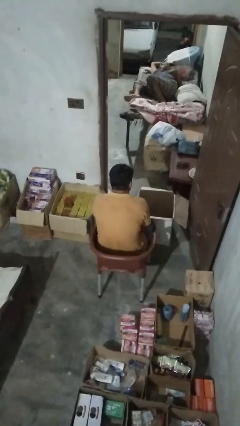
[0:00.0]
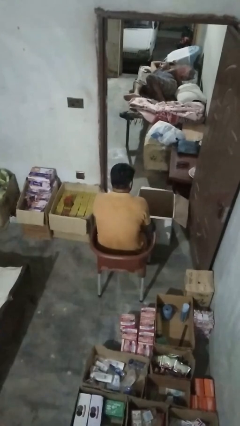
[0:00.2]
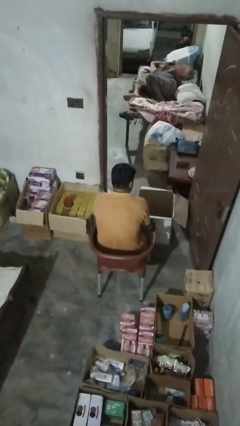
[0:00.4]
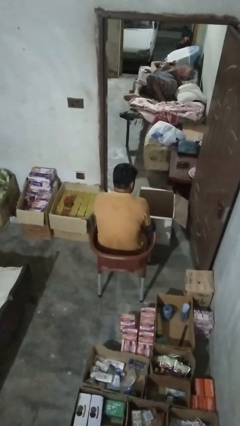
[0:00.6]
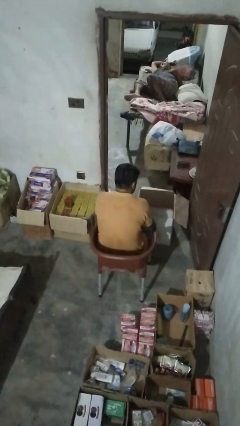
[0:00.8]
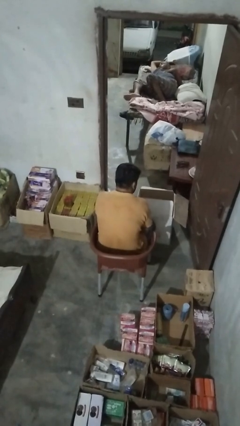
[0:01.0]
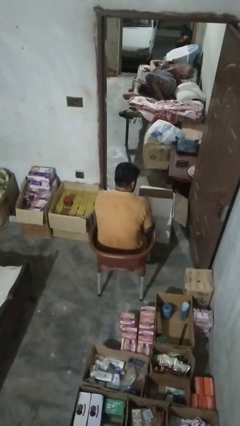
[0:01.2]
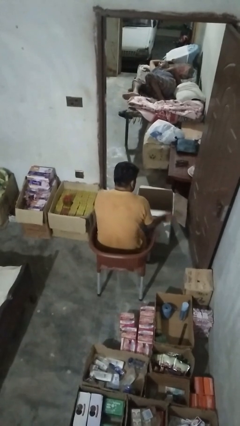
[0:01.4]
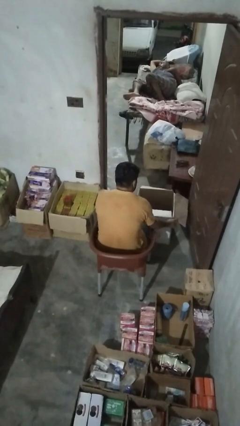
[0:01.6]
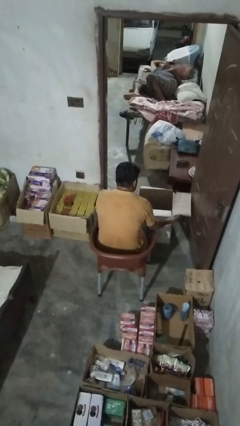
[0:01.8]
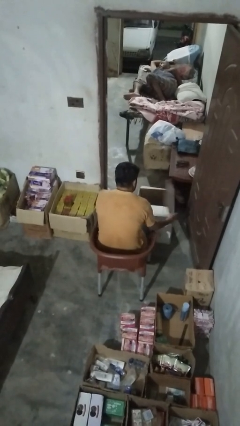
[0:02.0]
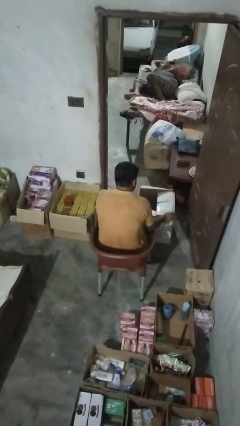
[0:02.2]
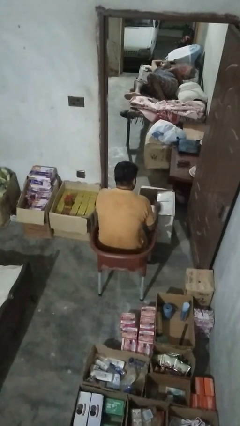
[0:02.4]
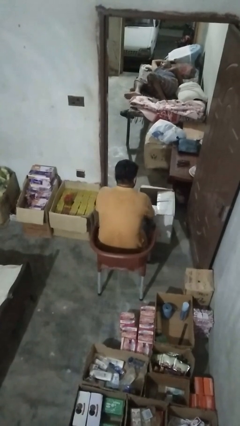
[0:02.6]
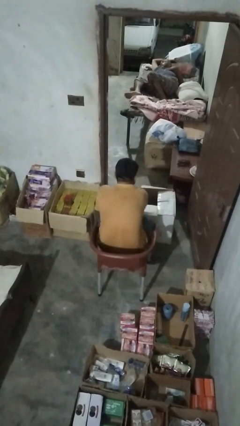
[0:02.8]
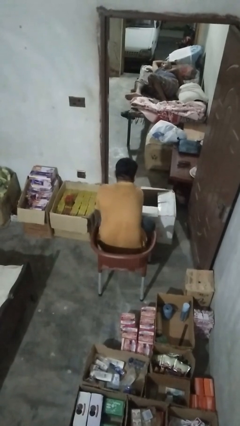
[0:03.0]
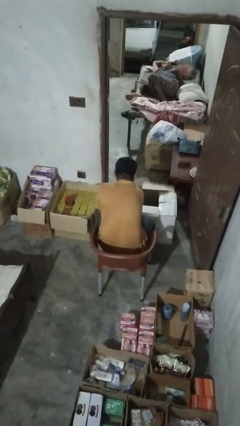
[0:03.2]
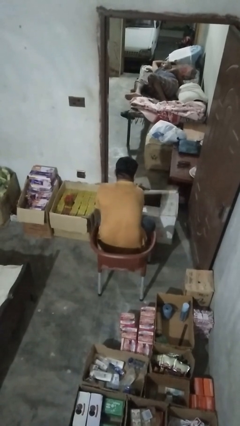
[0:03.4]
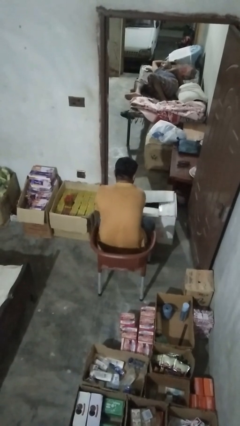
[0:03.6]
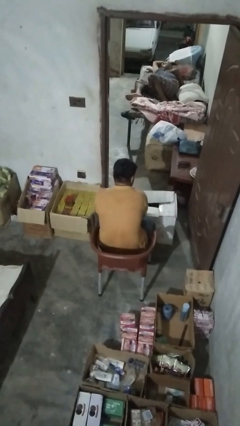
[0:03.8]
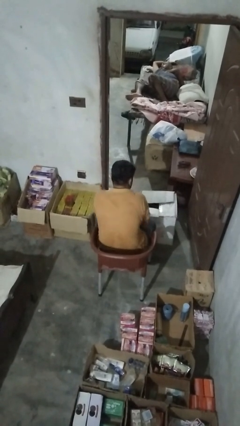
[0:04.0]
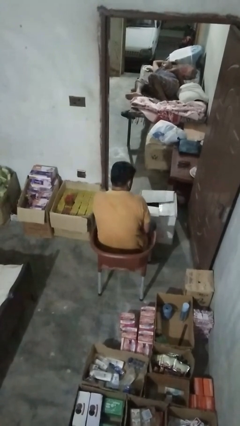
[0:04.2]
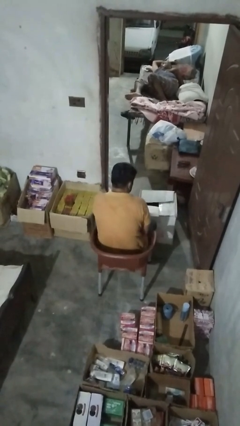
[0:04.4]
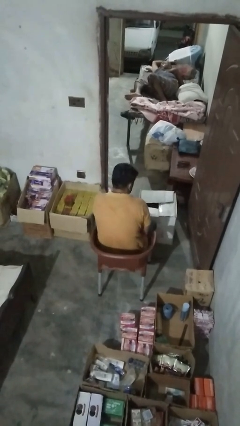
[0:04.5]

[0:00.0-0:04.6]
person opens box

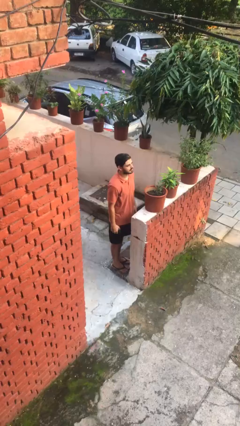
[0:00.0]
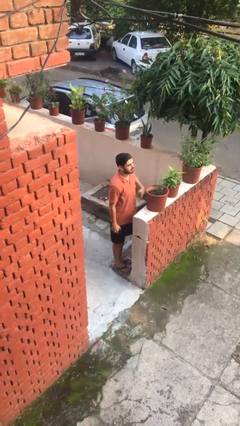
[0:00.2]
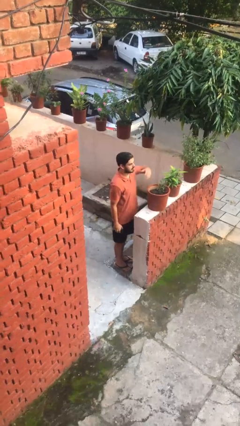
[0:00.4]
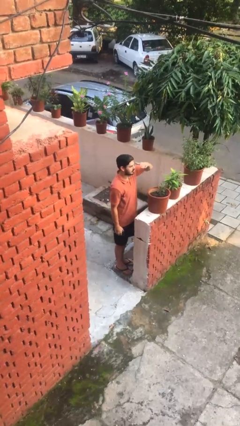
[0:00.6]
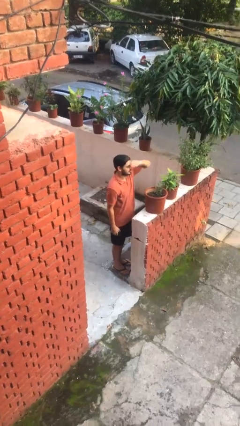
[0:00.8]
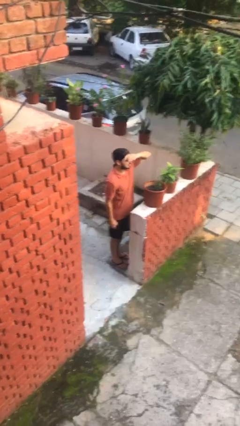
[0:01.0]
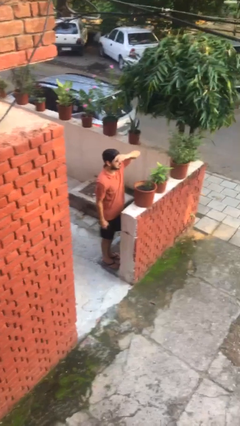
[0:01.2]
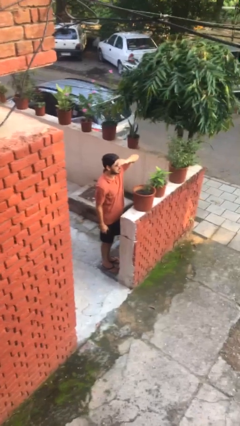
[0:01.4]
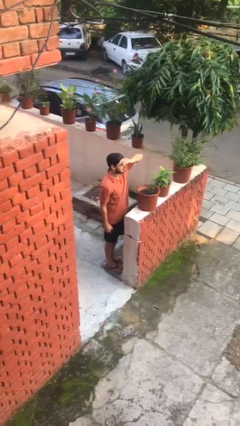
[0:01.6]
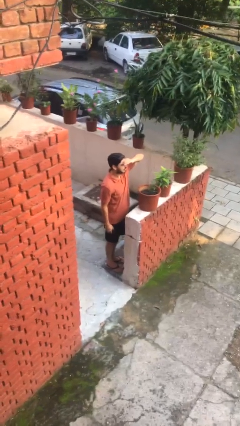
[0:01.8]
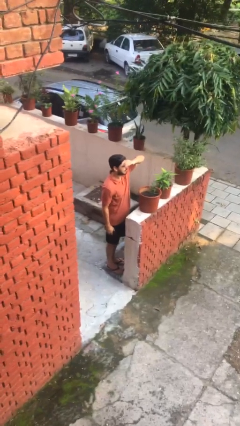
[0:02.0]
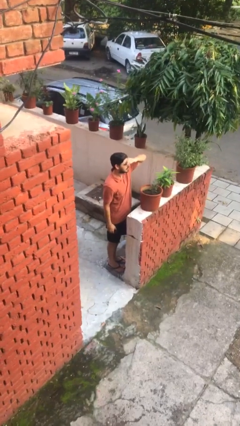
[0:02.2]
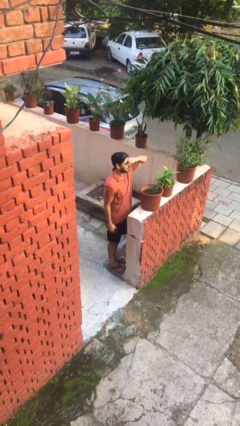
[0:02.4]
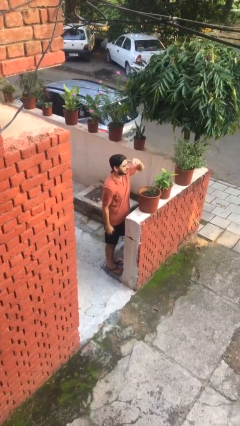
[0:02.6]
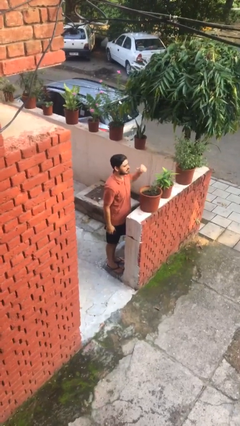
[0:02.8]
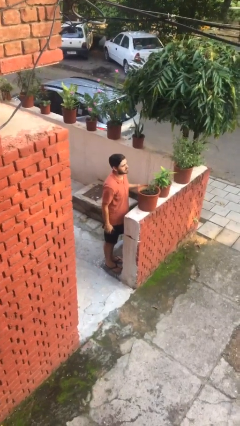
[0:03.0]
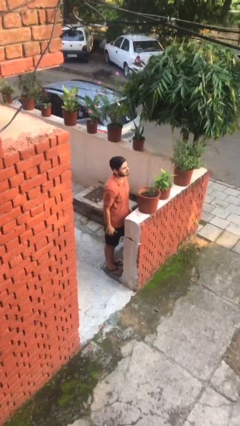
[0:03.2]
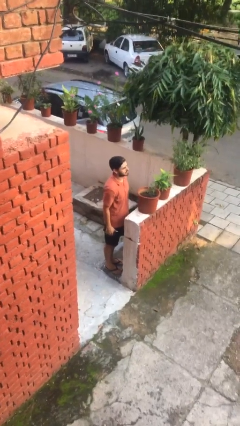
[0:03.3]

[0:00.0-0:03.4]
person shades eyes

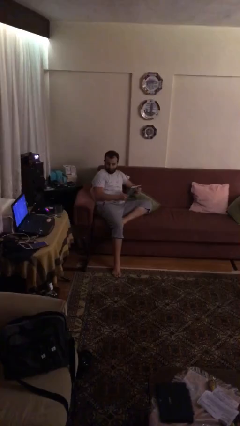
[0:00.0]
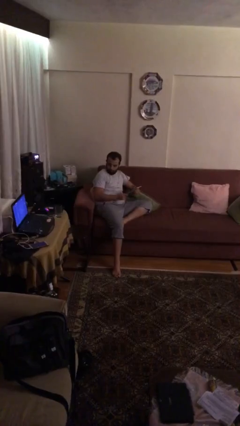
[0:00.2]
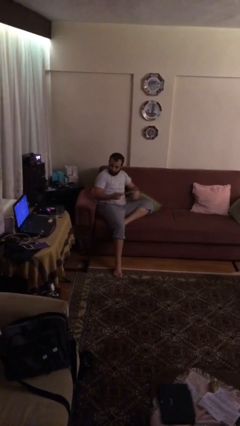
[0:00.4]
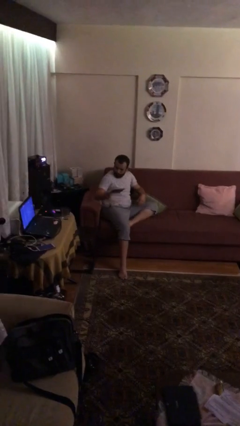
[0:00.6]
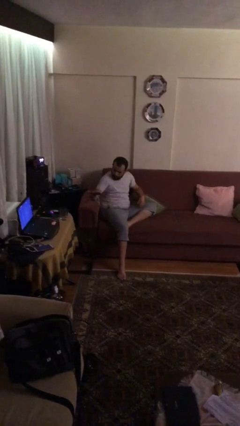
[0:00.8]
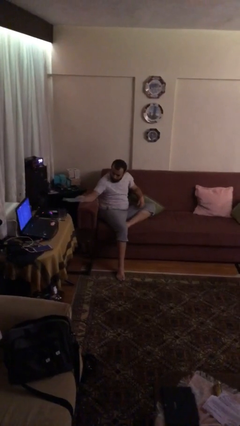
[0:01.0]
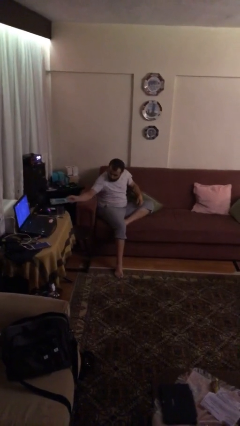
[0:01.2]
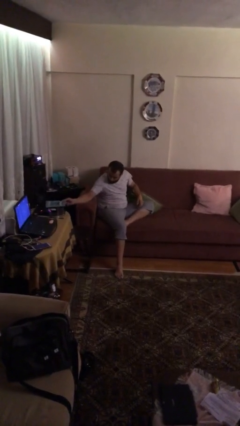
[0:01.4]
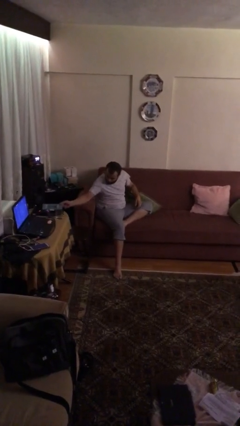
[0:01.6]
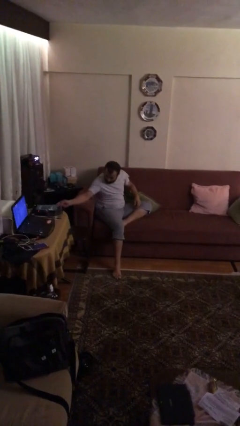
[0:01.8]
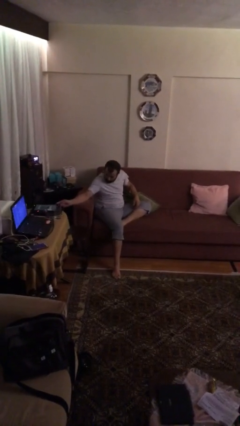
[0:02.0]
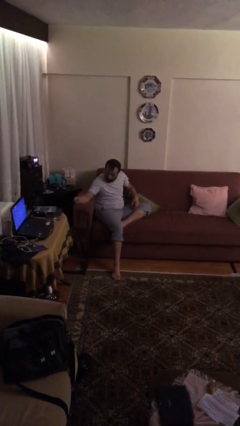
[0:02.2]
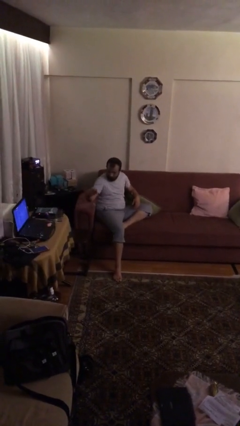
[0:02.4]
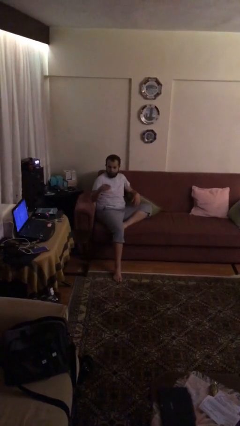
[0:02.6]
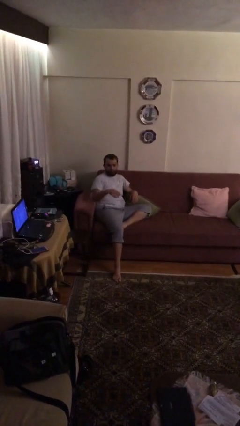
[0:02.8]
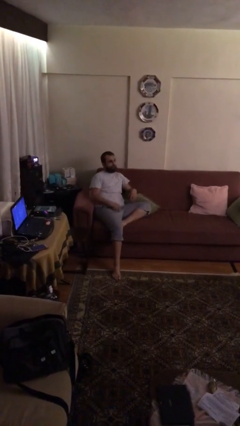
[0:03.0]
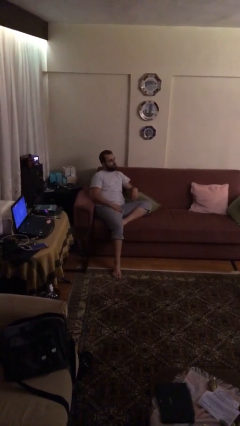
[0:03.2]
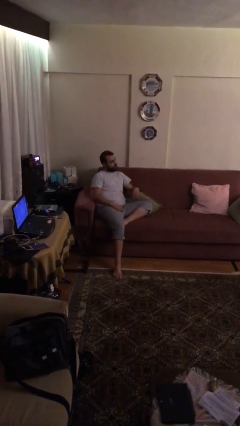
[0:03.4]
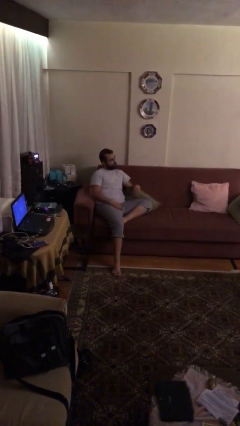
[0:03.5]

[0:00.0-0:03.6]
person puts down object on table

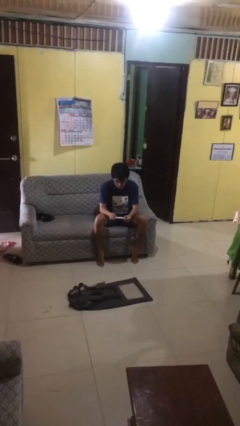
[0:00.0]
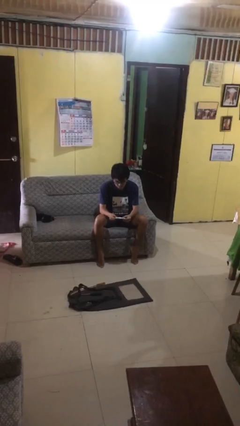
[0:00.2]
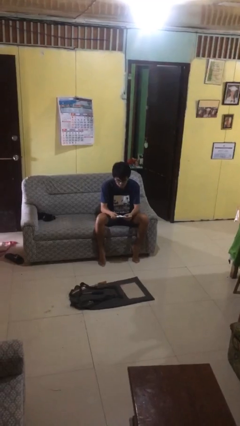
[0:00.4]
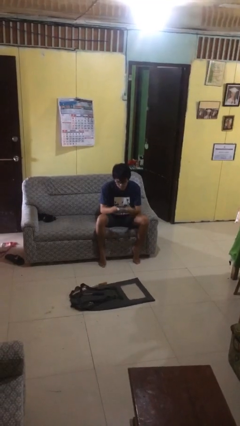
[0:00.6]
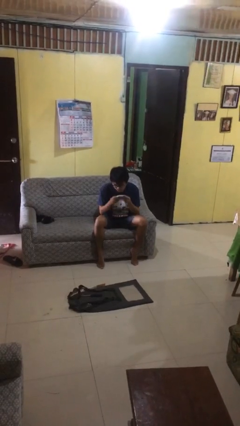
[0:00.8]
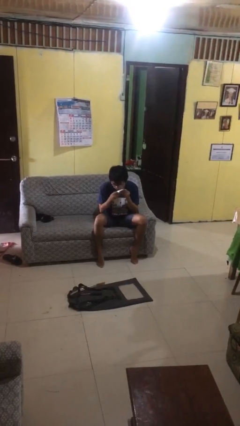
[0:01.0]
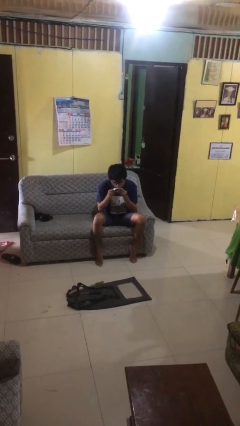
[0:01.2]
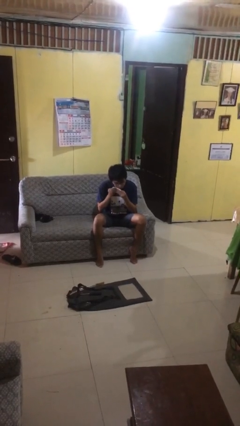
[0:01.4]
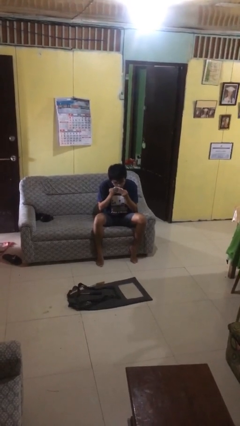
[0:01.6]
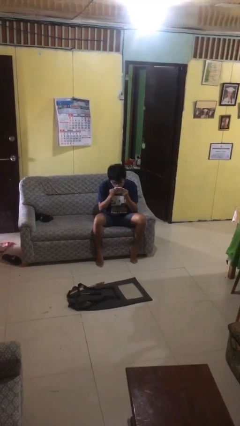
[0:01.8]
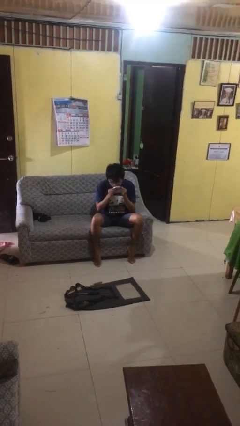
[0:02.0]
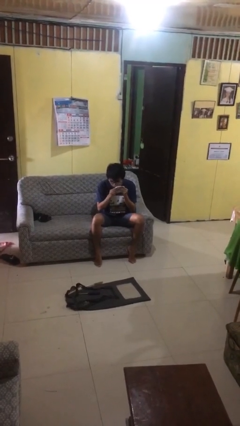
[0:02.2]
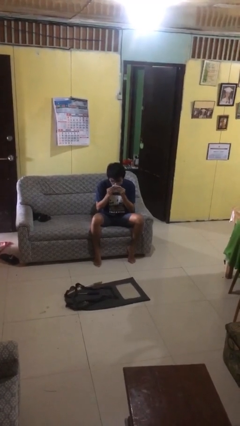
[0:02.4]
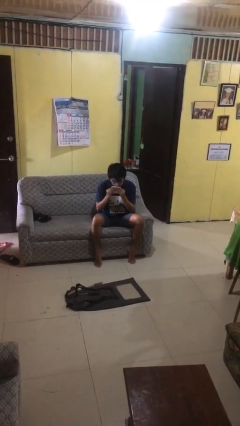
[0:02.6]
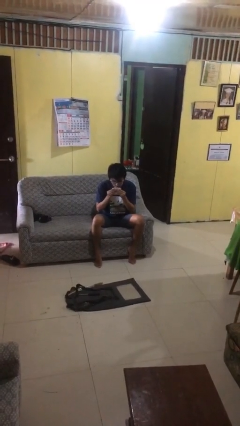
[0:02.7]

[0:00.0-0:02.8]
person wipes mouth with napkin

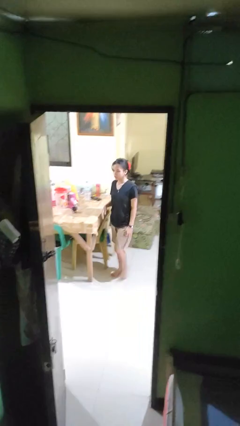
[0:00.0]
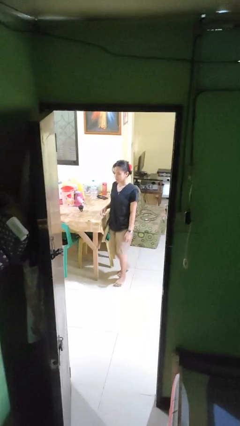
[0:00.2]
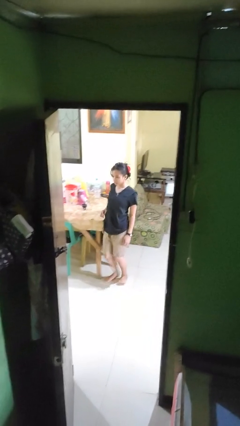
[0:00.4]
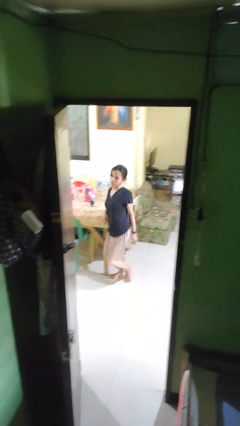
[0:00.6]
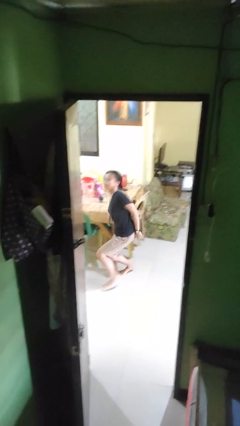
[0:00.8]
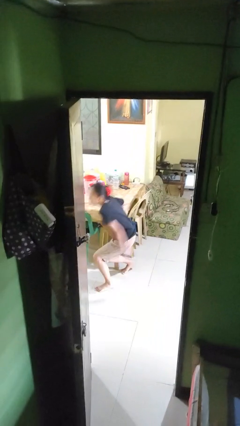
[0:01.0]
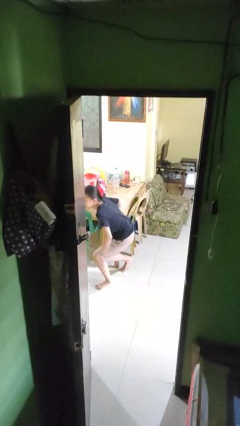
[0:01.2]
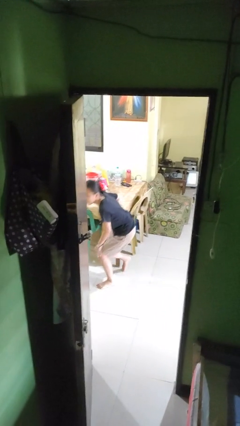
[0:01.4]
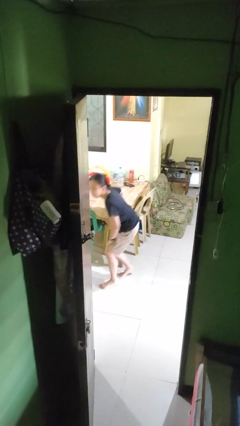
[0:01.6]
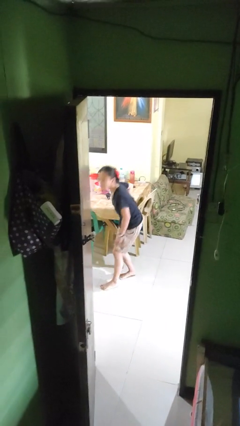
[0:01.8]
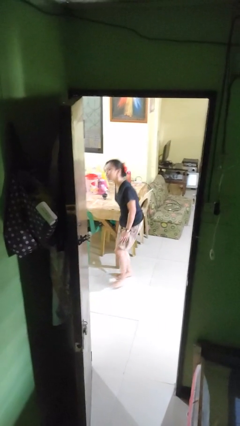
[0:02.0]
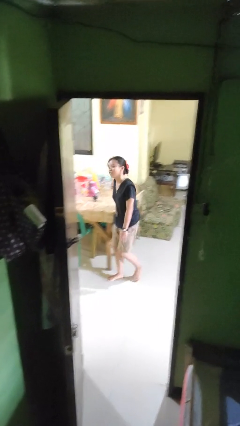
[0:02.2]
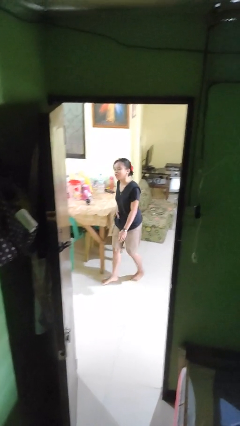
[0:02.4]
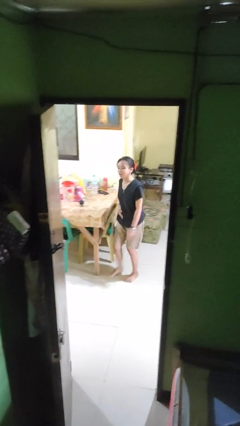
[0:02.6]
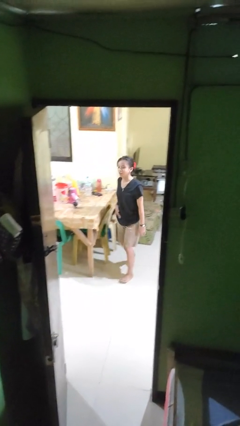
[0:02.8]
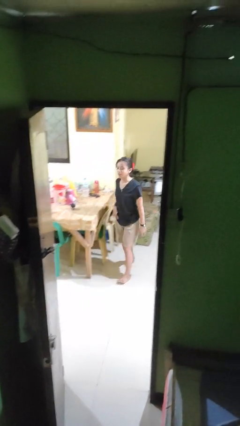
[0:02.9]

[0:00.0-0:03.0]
person bumps into table

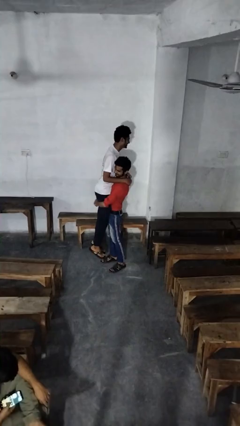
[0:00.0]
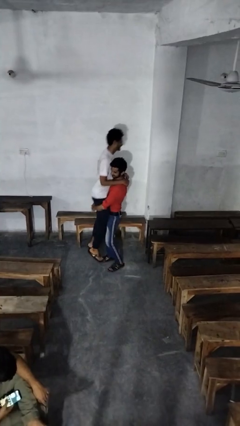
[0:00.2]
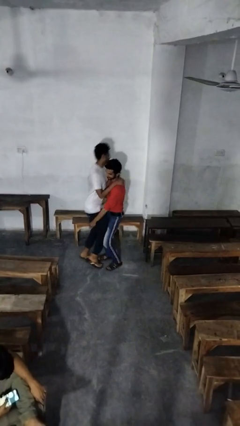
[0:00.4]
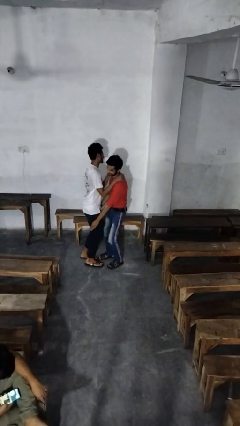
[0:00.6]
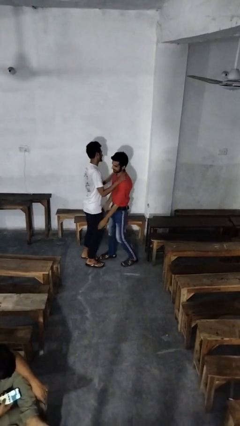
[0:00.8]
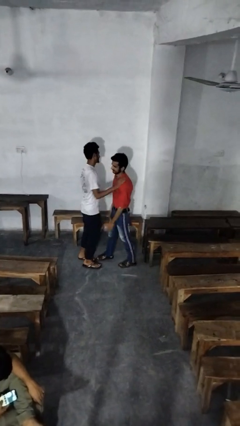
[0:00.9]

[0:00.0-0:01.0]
person puts down person
